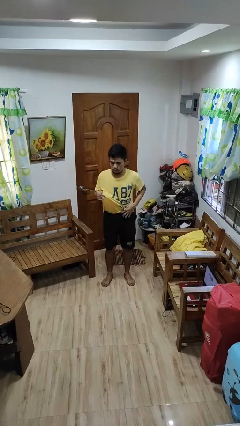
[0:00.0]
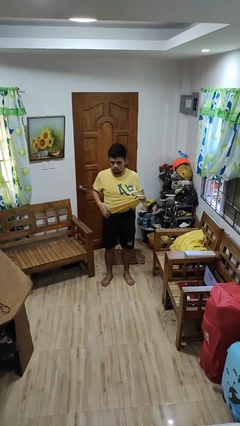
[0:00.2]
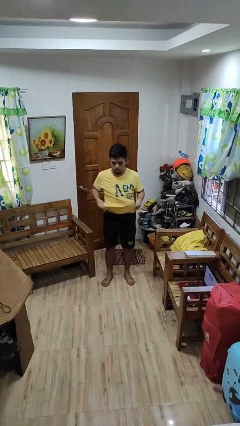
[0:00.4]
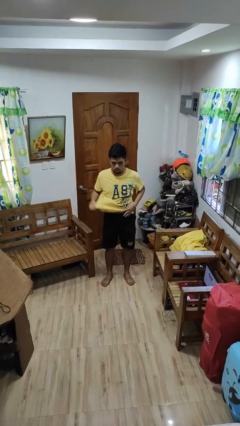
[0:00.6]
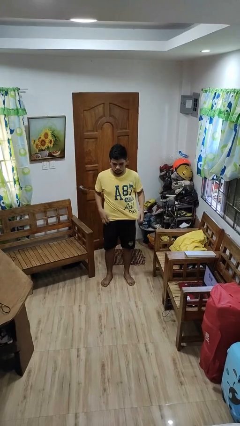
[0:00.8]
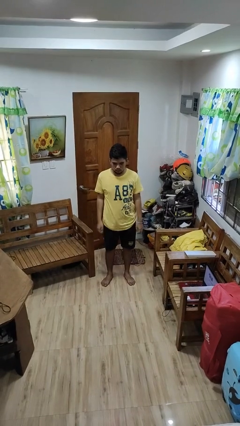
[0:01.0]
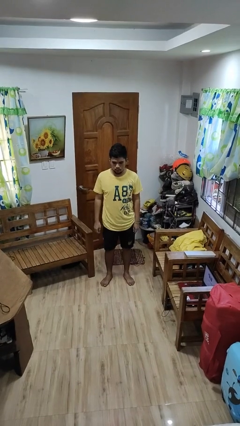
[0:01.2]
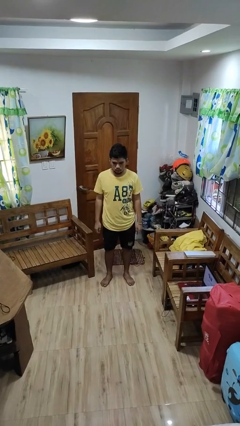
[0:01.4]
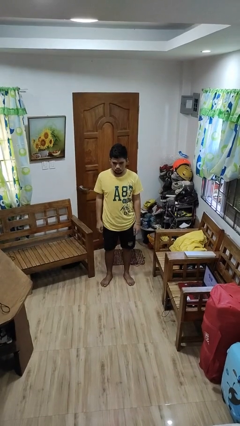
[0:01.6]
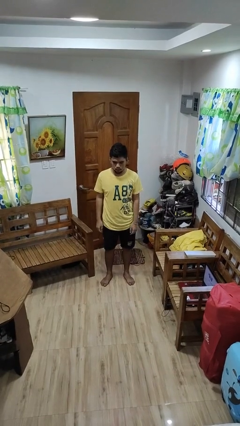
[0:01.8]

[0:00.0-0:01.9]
person untucks shirt

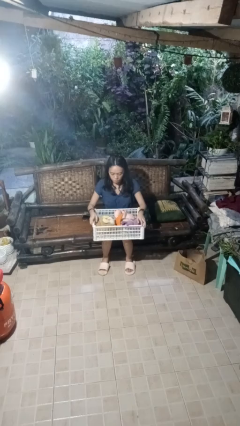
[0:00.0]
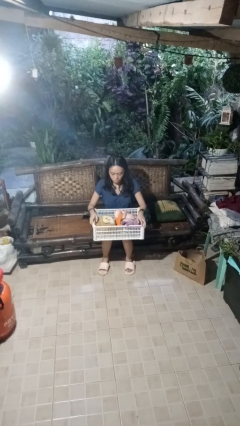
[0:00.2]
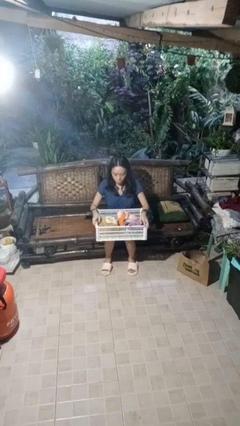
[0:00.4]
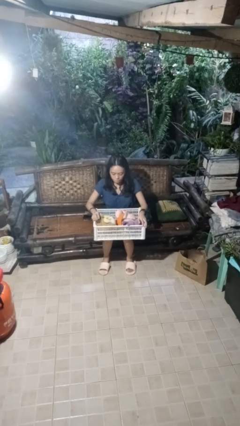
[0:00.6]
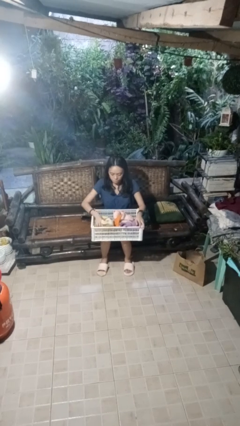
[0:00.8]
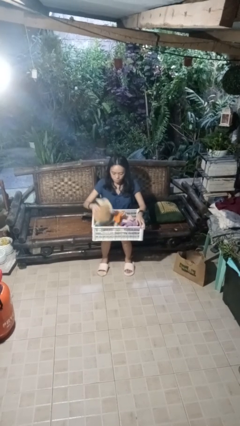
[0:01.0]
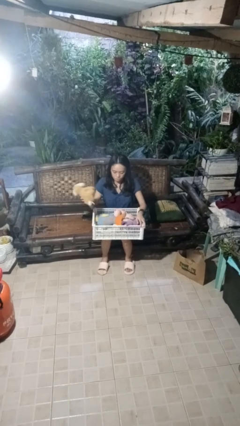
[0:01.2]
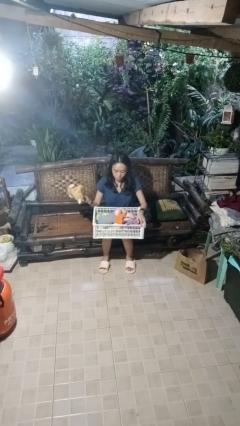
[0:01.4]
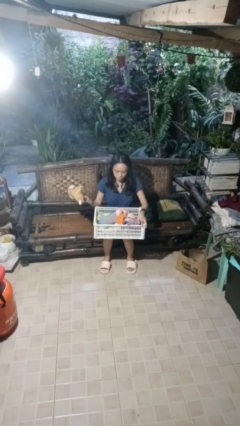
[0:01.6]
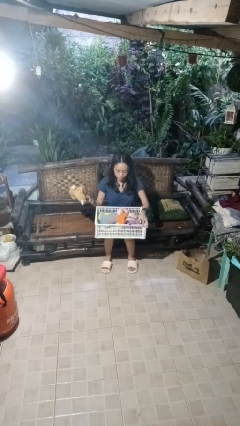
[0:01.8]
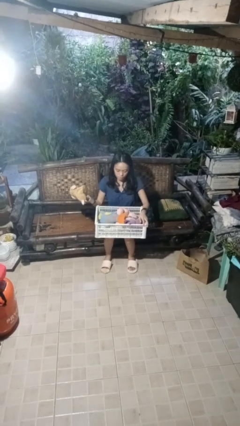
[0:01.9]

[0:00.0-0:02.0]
person takes object from basket

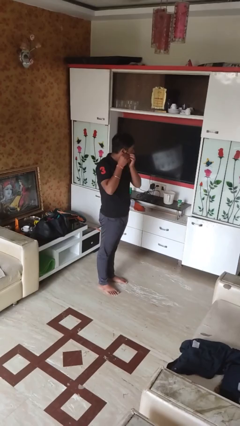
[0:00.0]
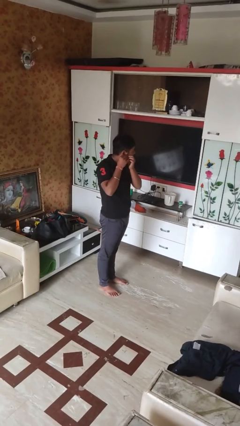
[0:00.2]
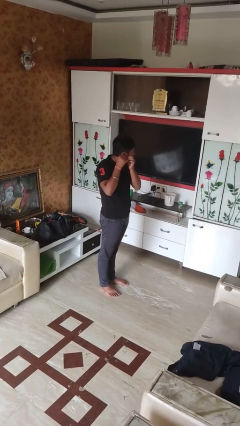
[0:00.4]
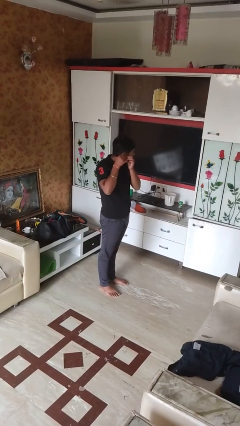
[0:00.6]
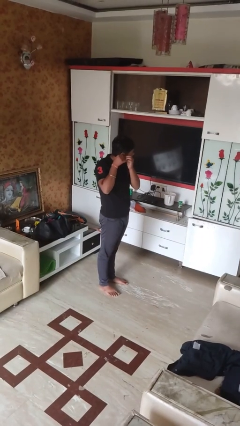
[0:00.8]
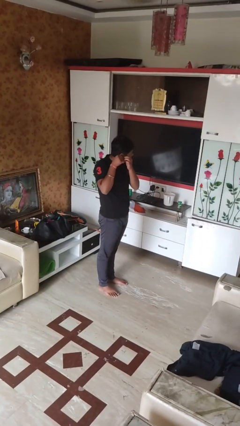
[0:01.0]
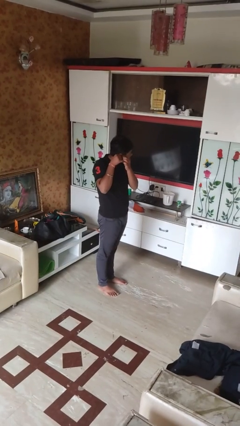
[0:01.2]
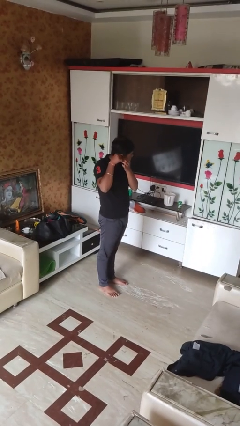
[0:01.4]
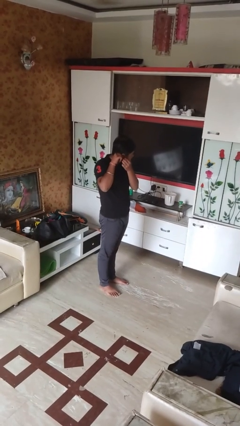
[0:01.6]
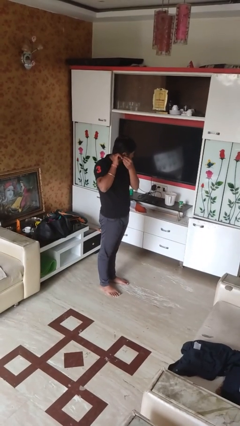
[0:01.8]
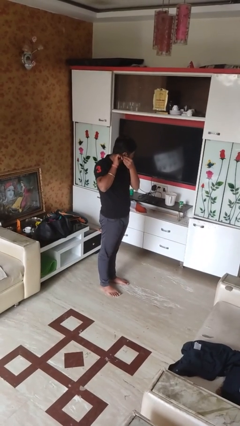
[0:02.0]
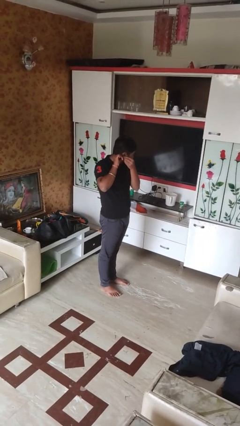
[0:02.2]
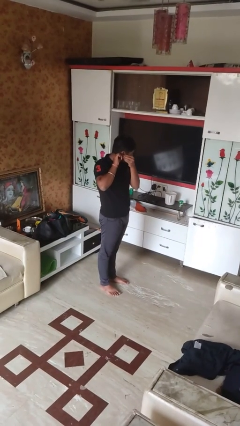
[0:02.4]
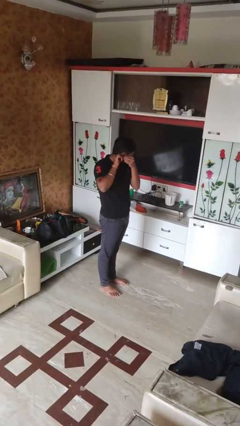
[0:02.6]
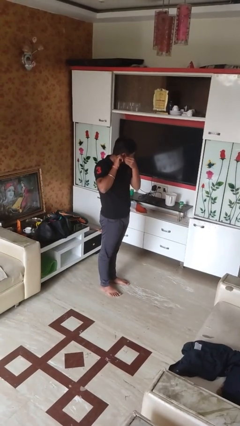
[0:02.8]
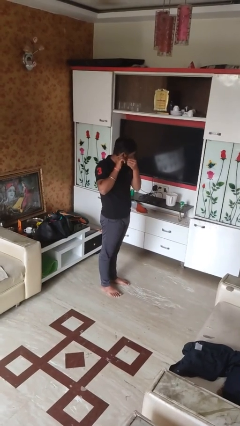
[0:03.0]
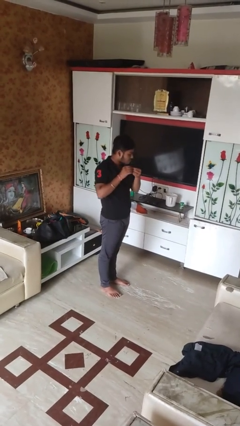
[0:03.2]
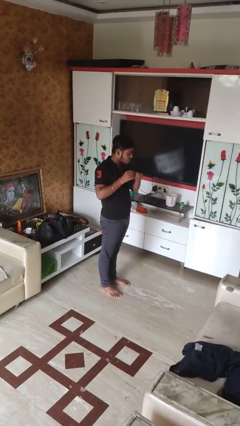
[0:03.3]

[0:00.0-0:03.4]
person takes off earrings

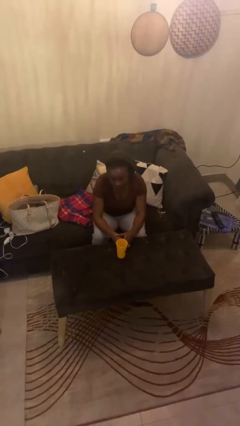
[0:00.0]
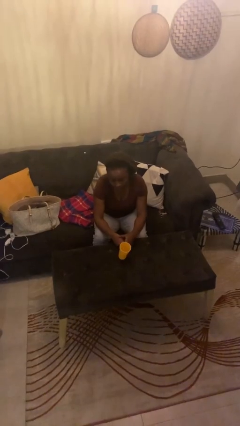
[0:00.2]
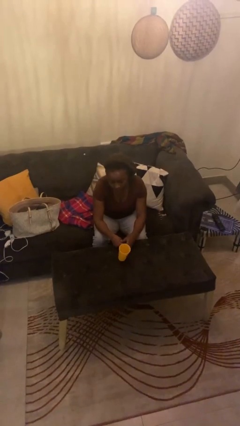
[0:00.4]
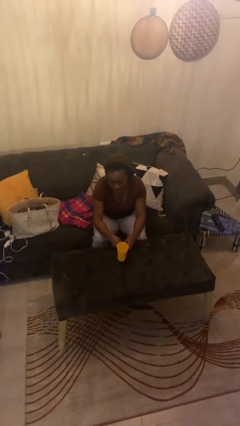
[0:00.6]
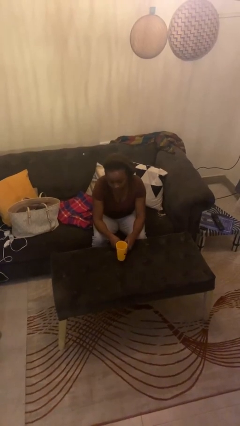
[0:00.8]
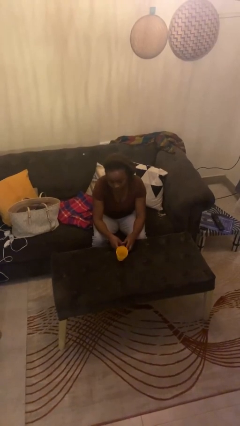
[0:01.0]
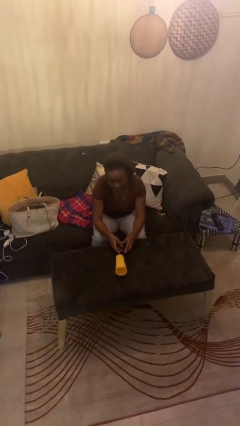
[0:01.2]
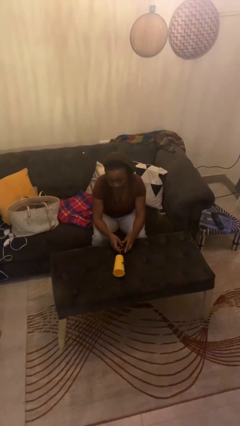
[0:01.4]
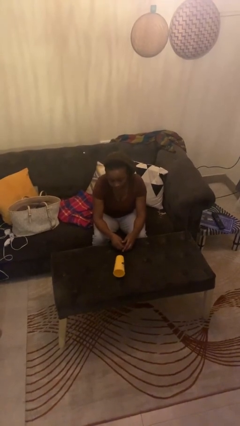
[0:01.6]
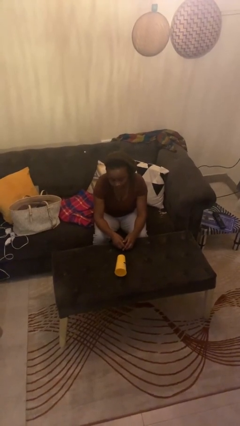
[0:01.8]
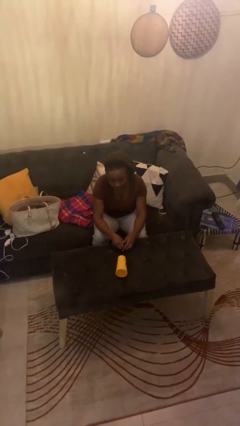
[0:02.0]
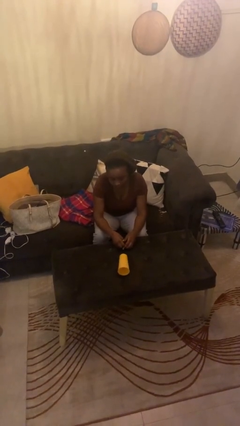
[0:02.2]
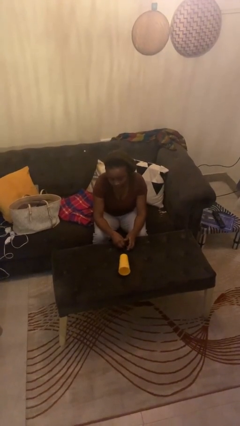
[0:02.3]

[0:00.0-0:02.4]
person knocks over glass

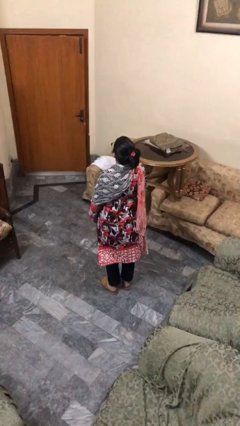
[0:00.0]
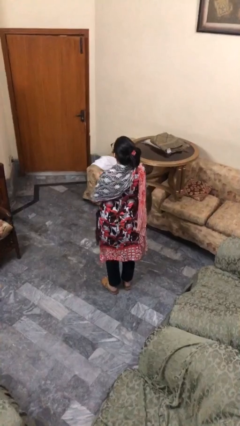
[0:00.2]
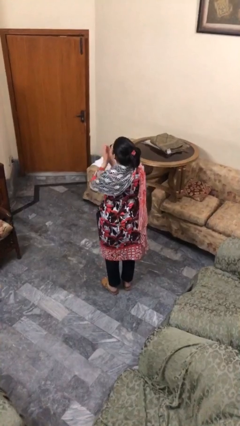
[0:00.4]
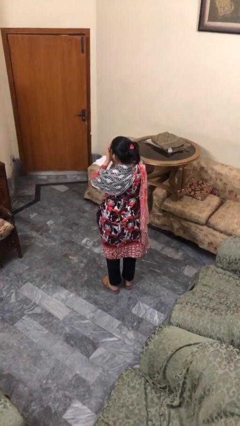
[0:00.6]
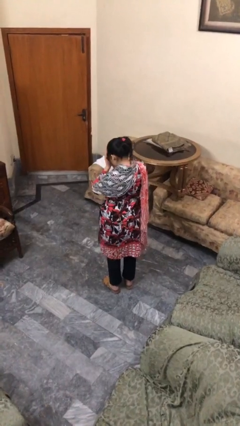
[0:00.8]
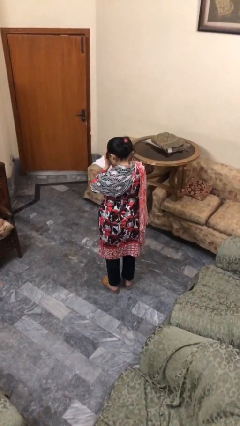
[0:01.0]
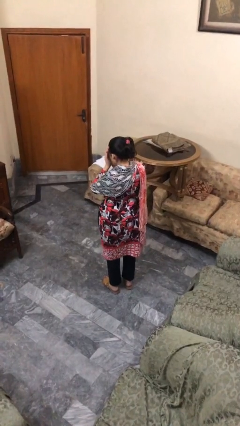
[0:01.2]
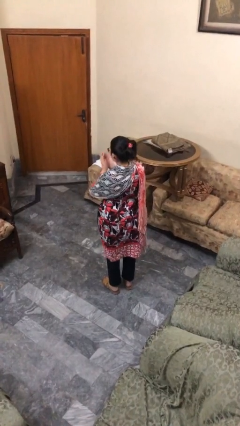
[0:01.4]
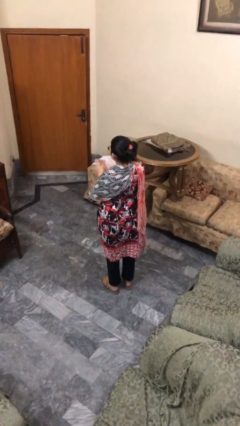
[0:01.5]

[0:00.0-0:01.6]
person sneezes into hand

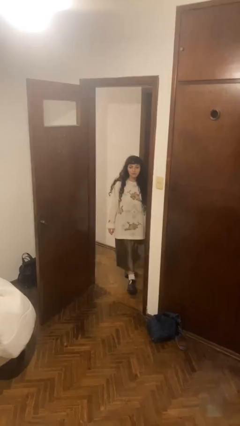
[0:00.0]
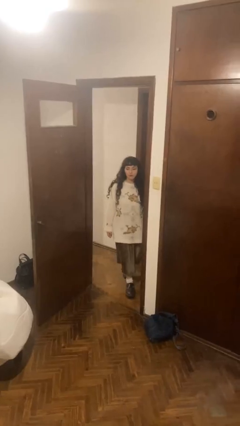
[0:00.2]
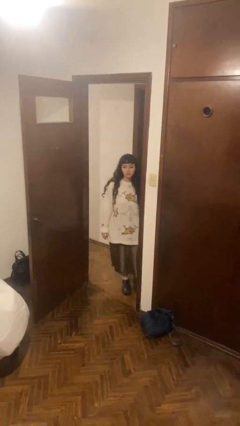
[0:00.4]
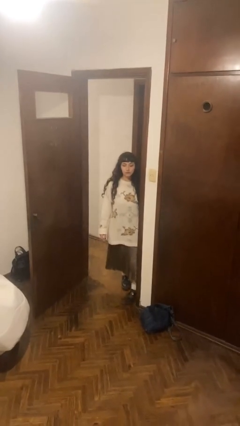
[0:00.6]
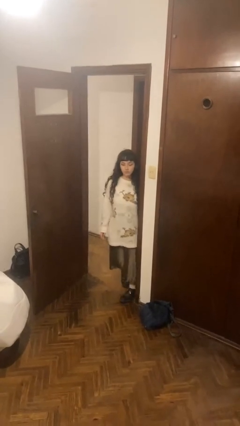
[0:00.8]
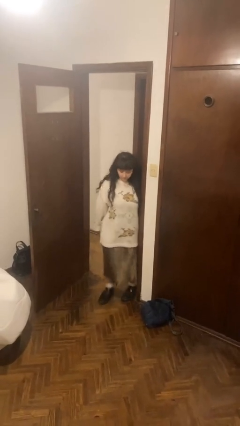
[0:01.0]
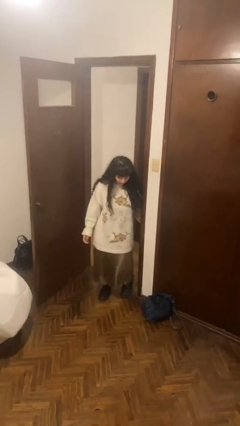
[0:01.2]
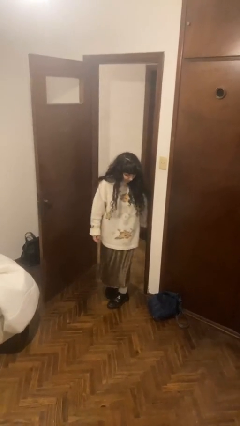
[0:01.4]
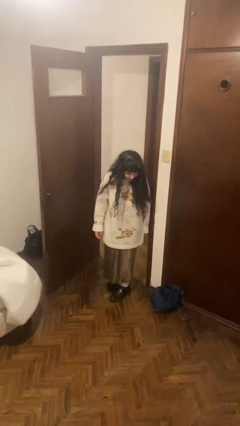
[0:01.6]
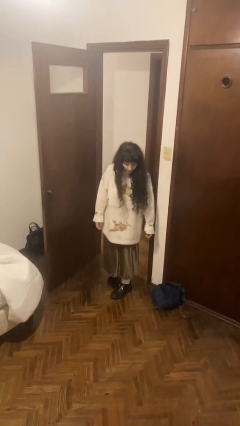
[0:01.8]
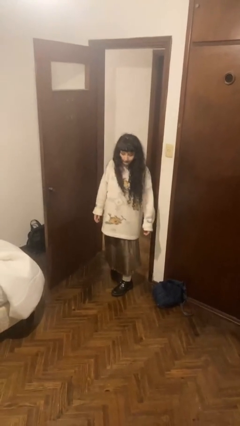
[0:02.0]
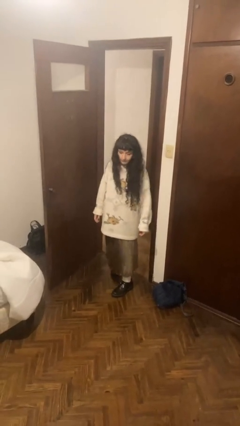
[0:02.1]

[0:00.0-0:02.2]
person bumps into wall

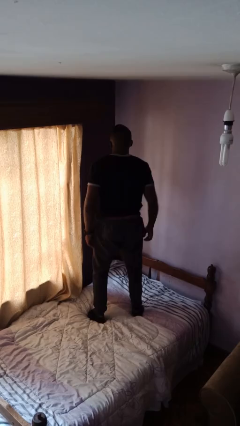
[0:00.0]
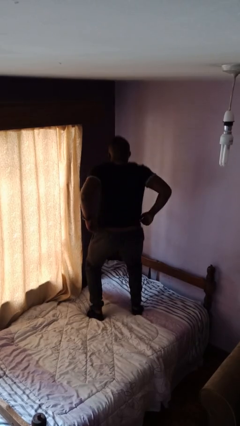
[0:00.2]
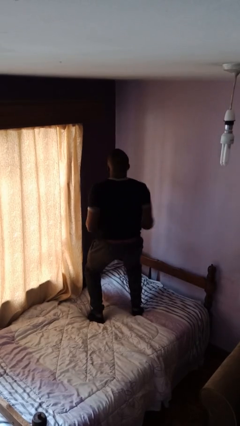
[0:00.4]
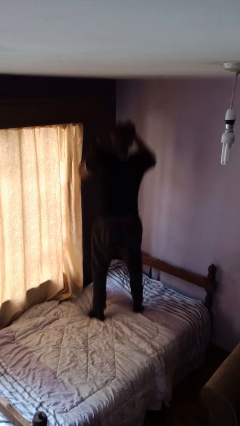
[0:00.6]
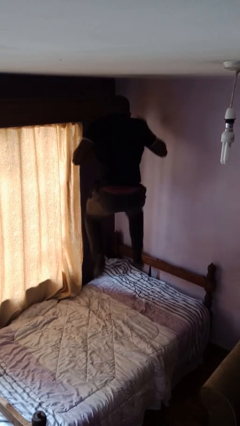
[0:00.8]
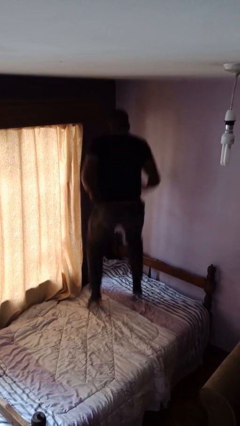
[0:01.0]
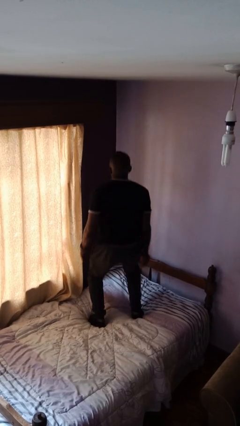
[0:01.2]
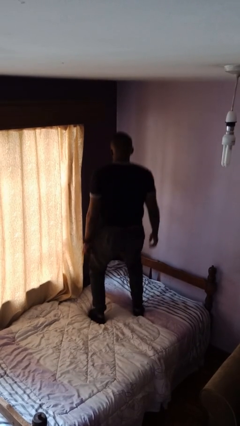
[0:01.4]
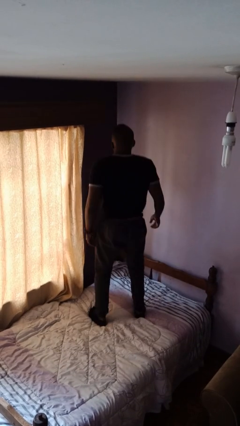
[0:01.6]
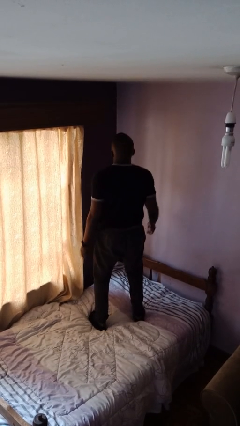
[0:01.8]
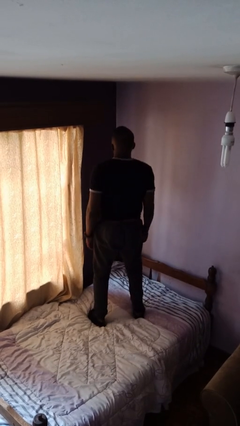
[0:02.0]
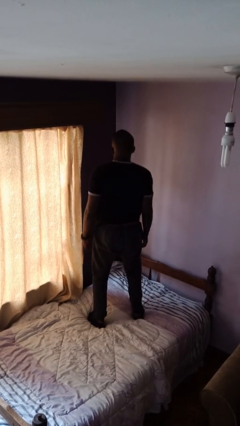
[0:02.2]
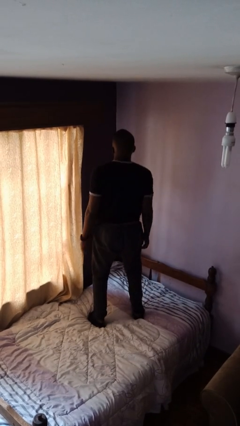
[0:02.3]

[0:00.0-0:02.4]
person jumps on bed

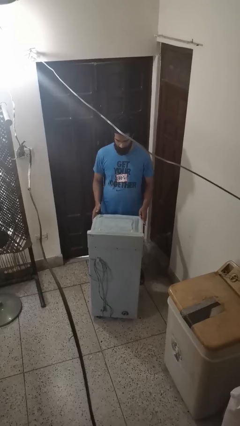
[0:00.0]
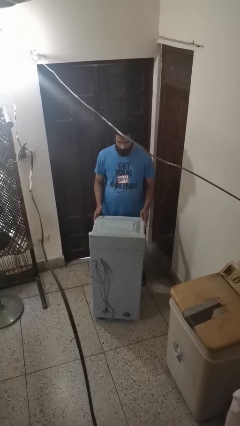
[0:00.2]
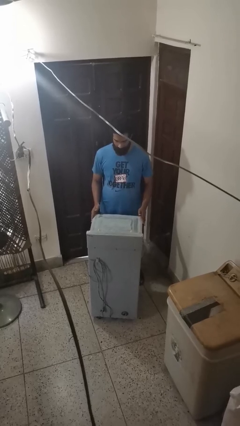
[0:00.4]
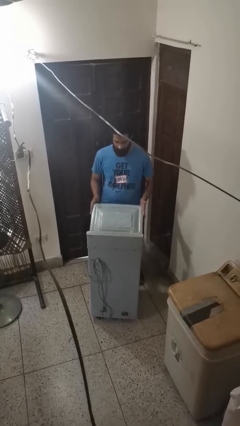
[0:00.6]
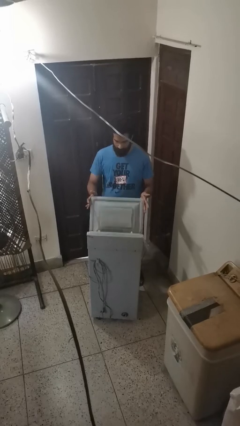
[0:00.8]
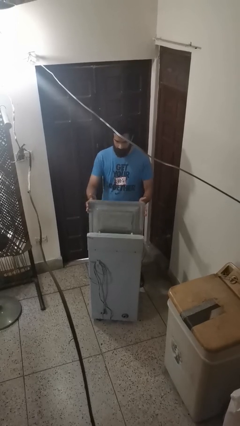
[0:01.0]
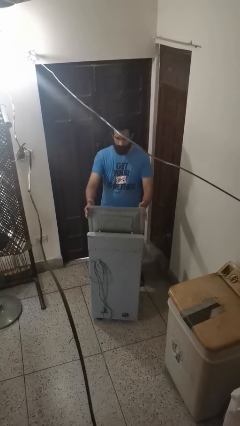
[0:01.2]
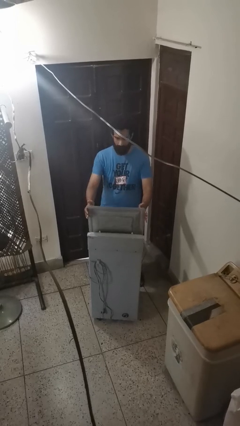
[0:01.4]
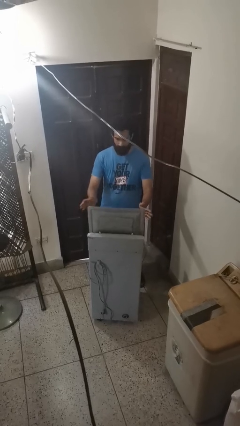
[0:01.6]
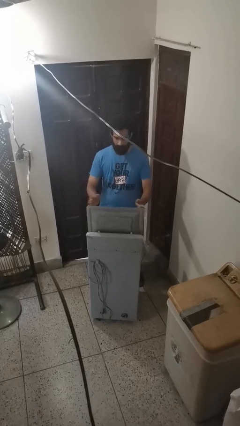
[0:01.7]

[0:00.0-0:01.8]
person opens clothes washer
